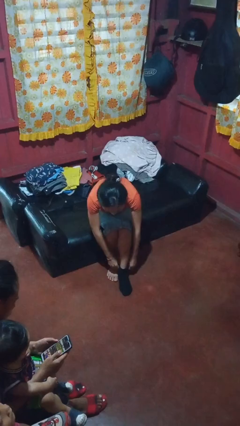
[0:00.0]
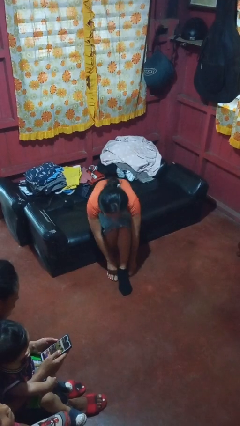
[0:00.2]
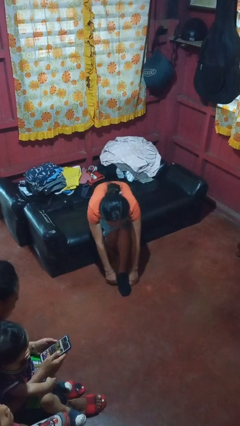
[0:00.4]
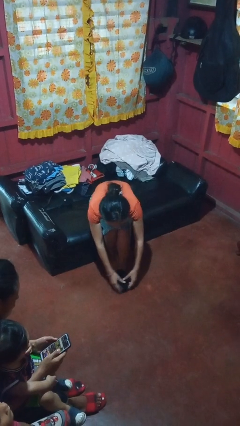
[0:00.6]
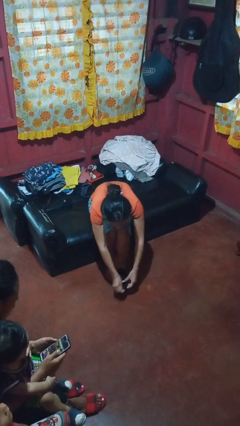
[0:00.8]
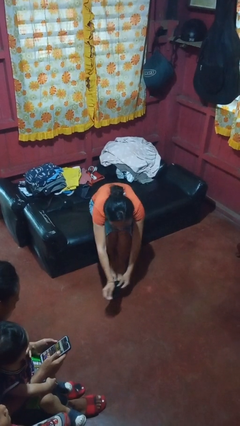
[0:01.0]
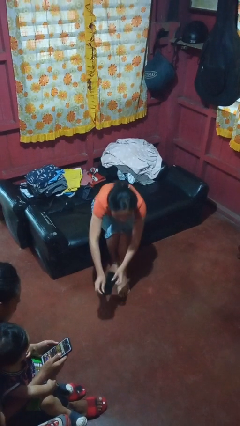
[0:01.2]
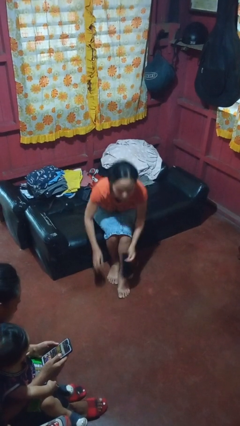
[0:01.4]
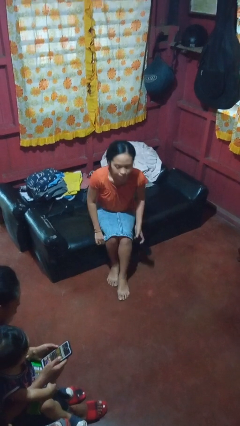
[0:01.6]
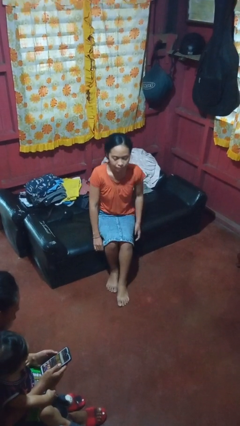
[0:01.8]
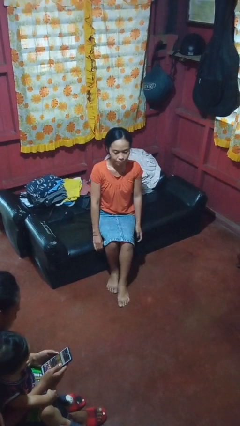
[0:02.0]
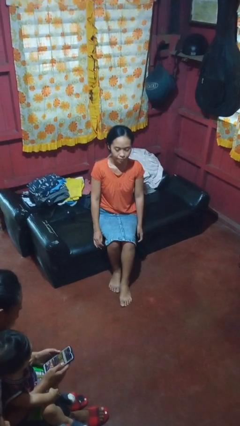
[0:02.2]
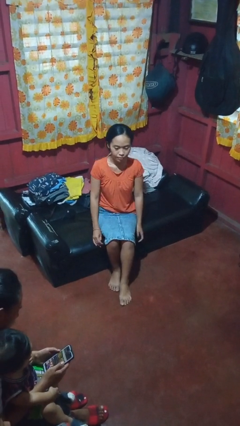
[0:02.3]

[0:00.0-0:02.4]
person takes off socks

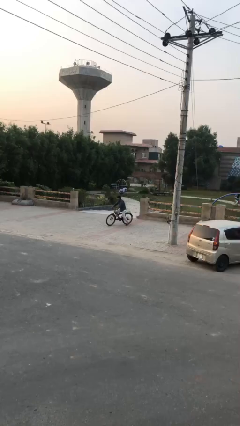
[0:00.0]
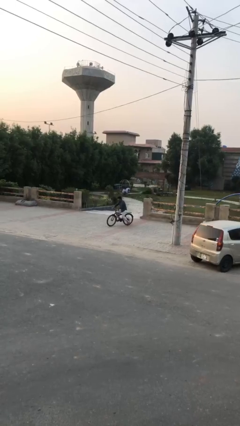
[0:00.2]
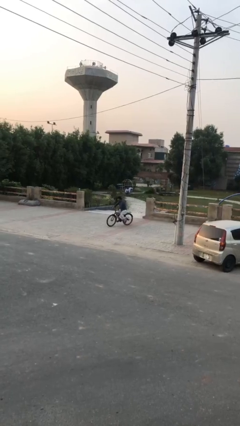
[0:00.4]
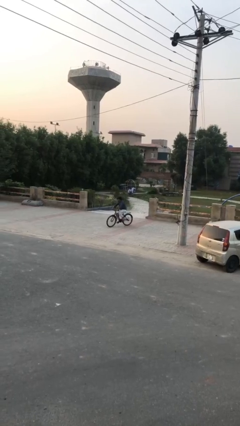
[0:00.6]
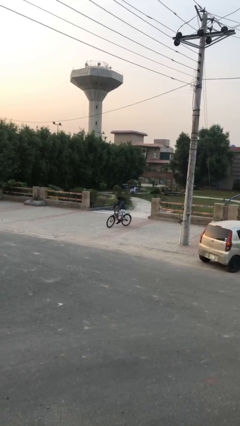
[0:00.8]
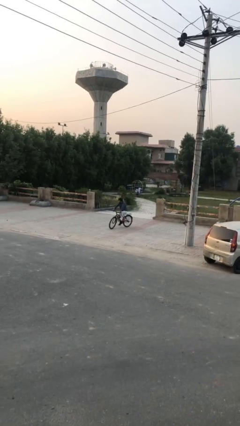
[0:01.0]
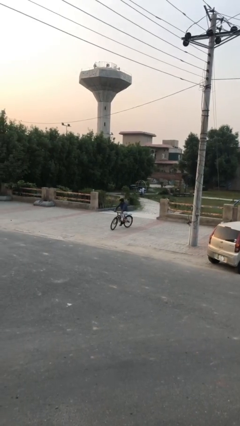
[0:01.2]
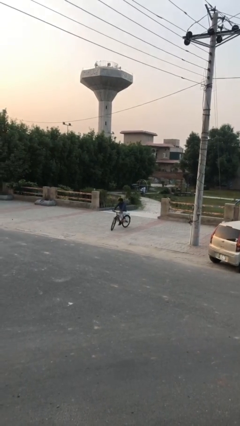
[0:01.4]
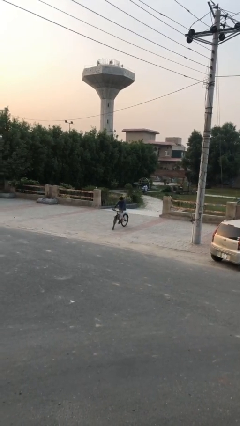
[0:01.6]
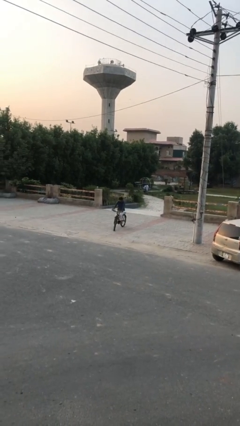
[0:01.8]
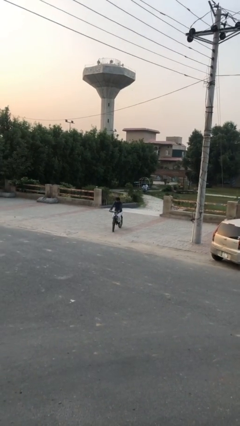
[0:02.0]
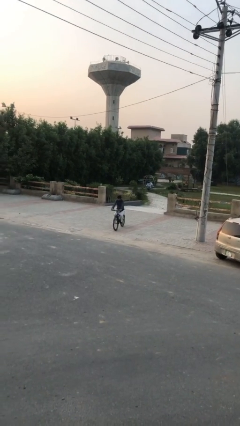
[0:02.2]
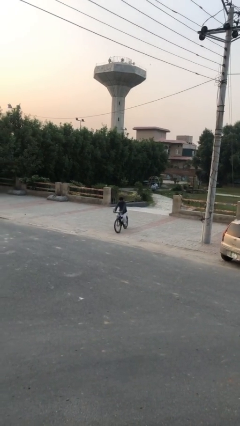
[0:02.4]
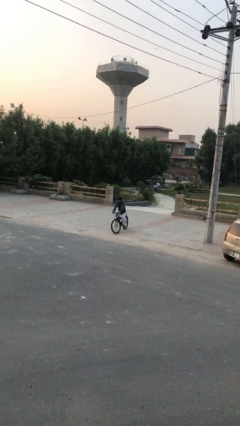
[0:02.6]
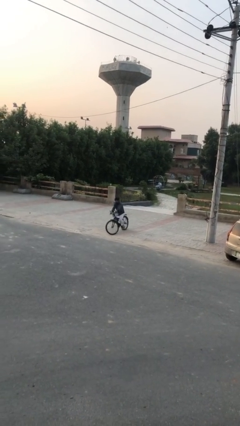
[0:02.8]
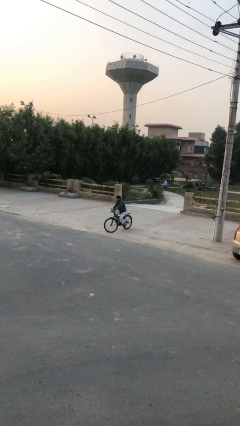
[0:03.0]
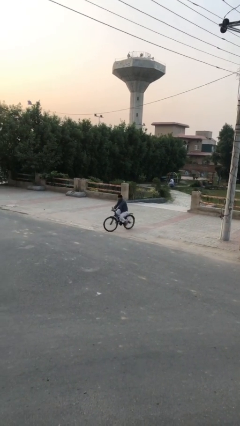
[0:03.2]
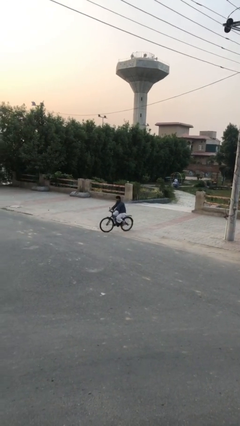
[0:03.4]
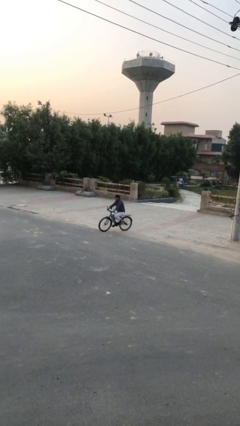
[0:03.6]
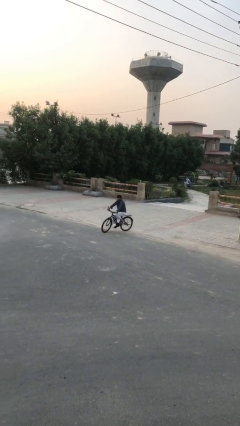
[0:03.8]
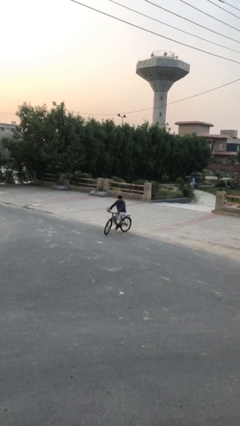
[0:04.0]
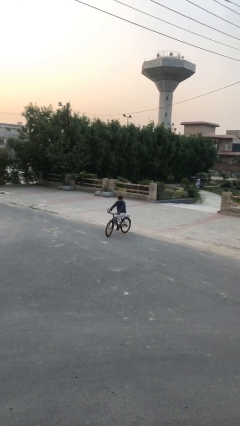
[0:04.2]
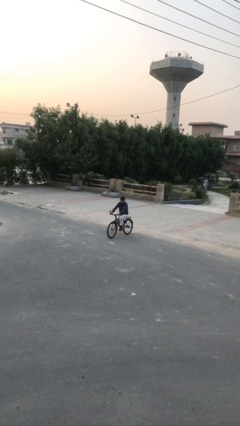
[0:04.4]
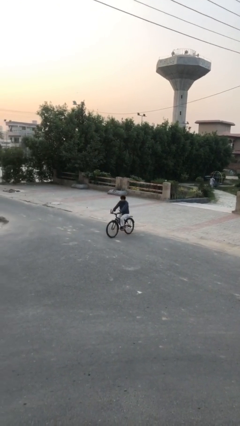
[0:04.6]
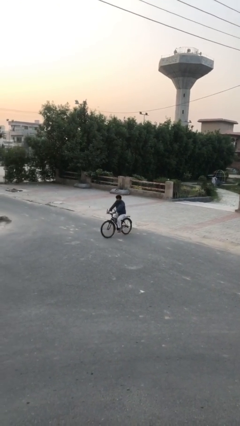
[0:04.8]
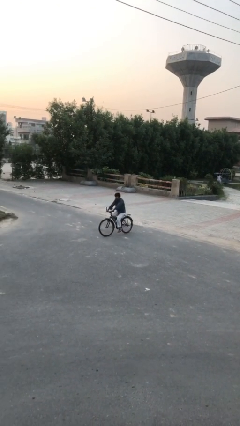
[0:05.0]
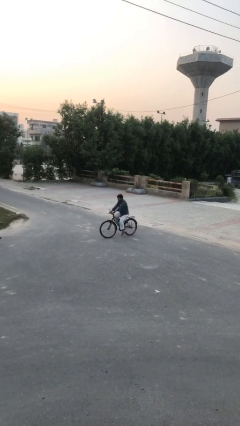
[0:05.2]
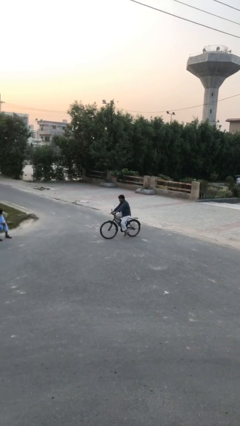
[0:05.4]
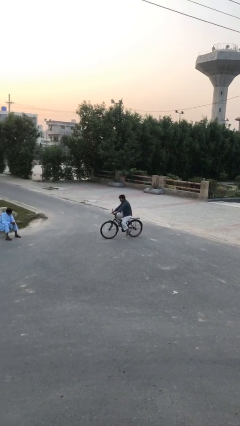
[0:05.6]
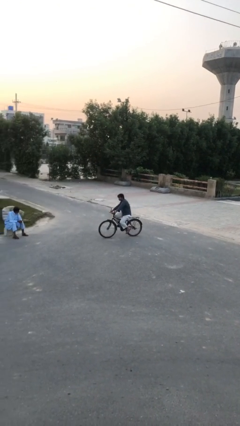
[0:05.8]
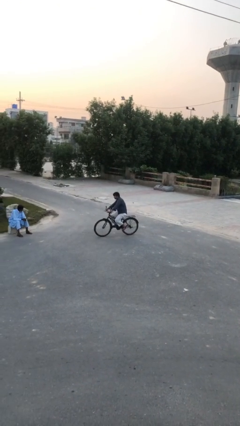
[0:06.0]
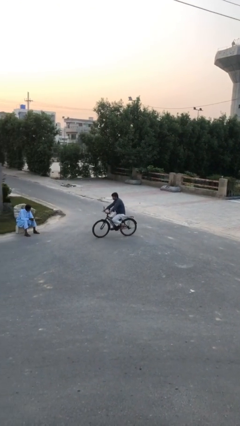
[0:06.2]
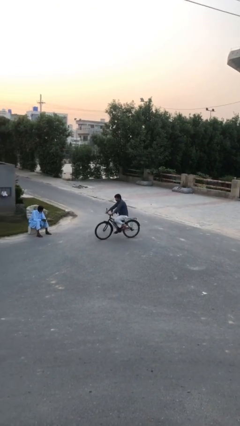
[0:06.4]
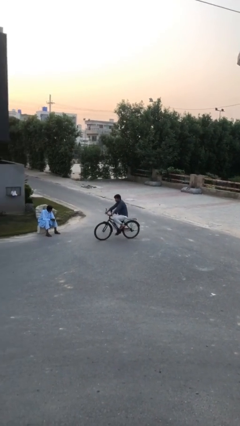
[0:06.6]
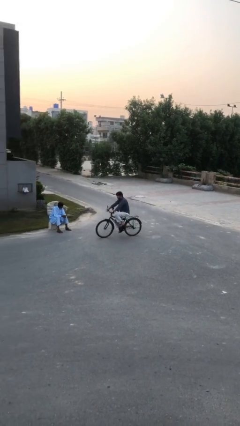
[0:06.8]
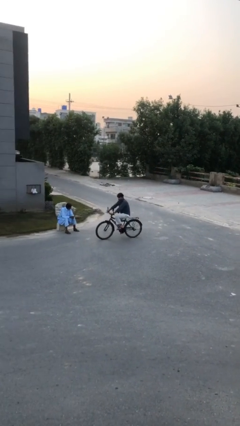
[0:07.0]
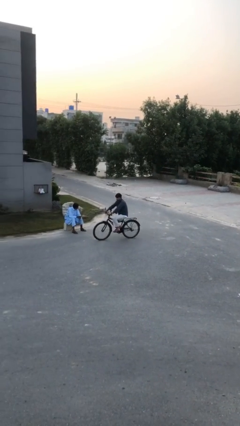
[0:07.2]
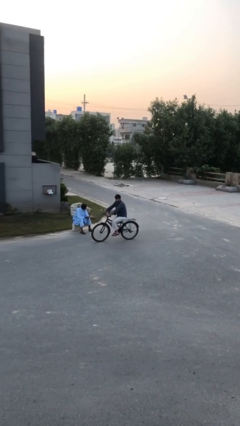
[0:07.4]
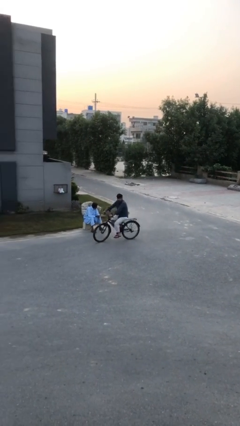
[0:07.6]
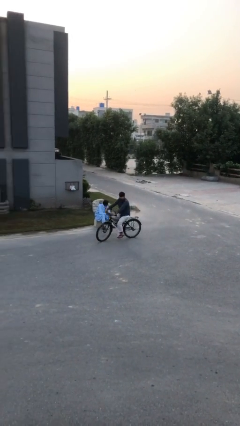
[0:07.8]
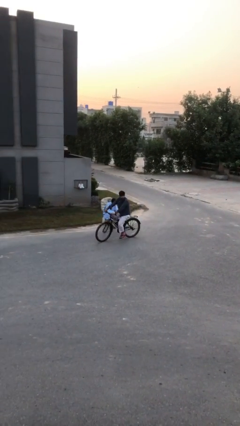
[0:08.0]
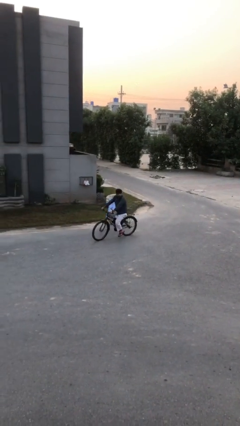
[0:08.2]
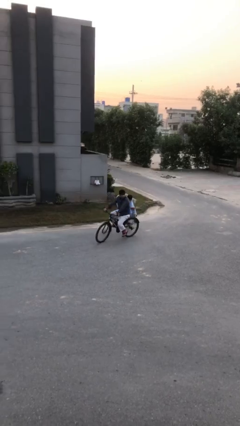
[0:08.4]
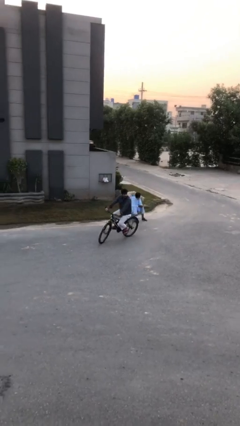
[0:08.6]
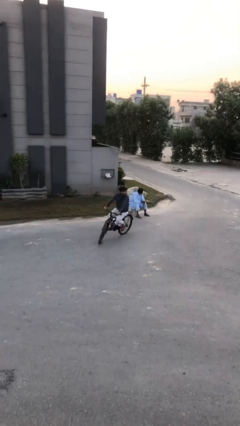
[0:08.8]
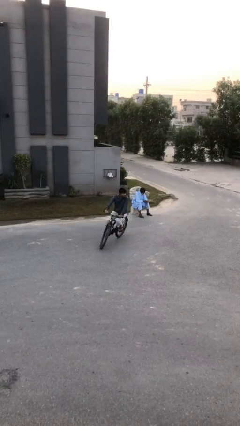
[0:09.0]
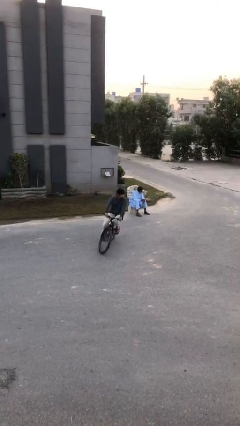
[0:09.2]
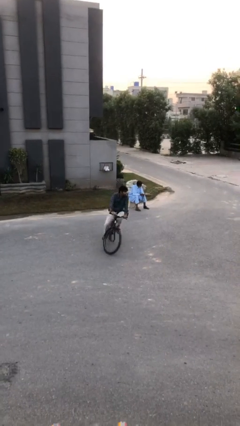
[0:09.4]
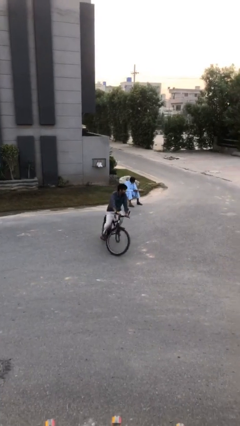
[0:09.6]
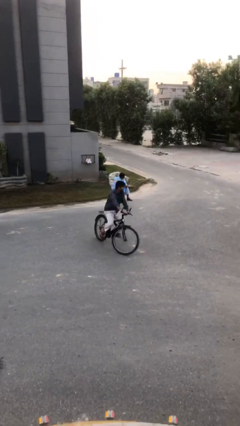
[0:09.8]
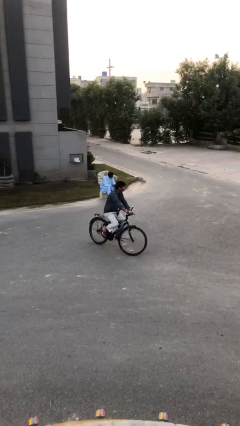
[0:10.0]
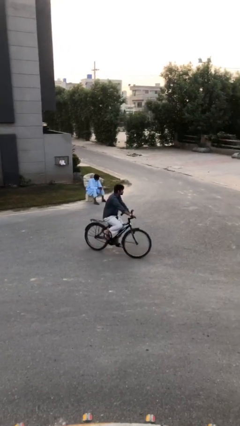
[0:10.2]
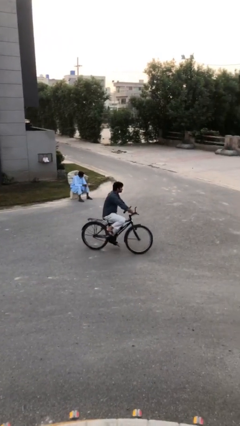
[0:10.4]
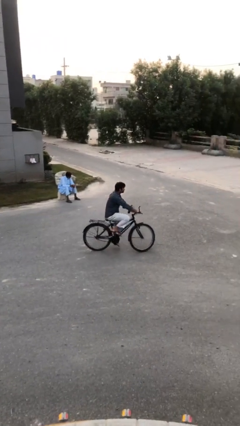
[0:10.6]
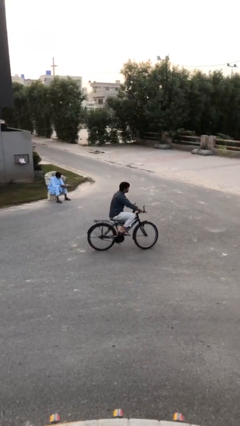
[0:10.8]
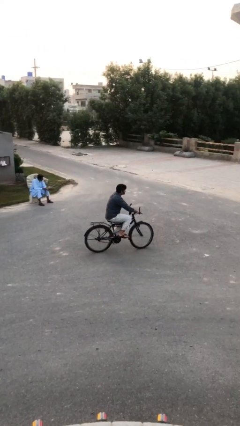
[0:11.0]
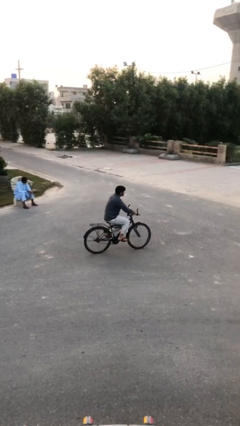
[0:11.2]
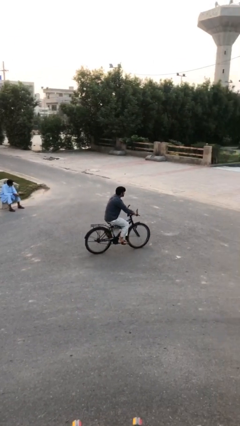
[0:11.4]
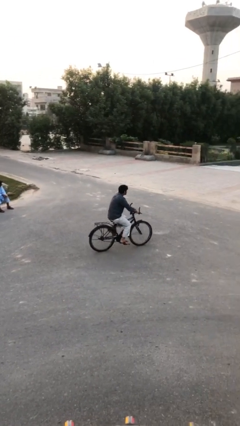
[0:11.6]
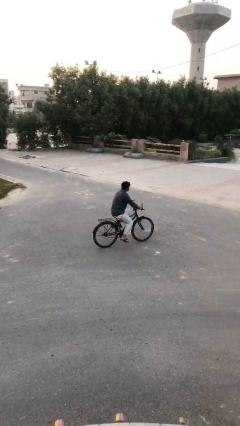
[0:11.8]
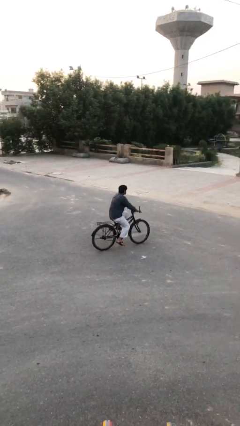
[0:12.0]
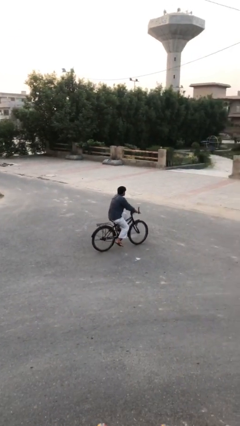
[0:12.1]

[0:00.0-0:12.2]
person rides bicycle

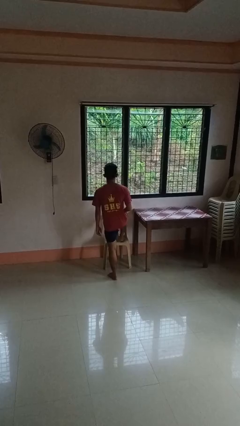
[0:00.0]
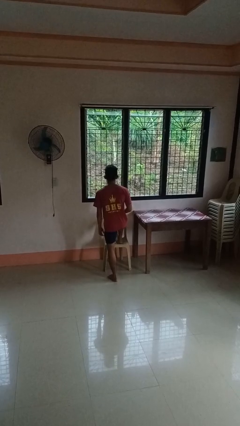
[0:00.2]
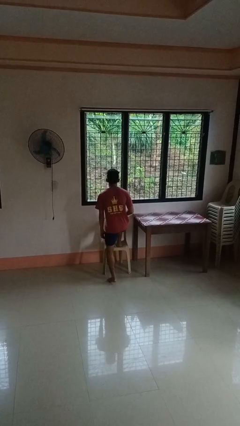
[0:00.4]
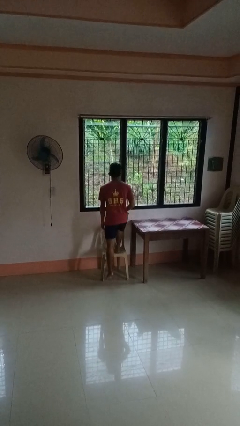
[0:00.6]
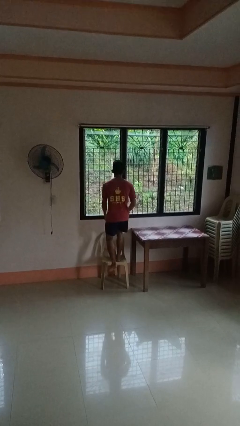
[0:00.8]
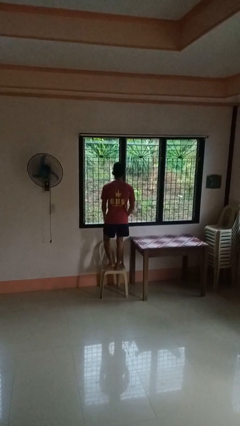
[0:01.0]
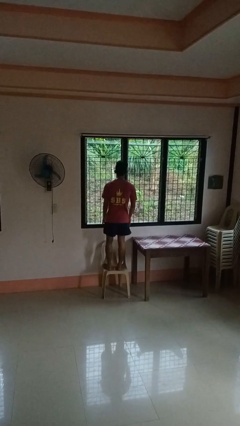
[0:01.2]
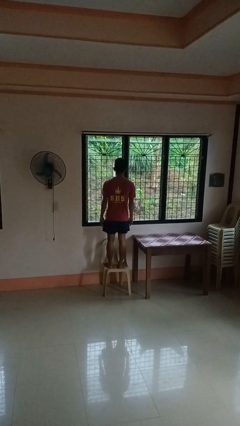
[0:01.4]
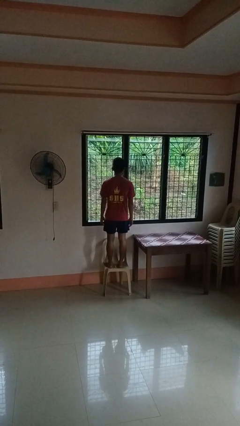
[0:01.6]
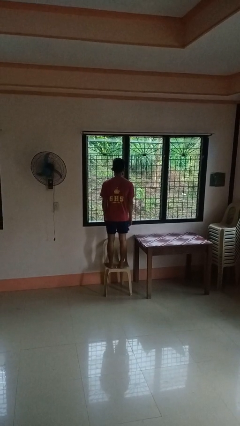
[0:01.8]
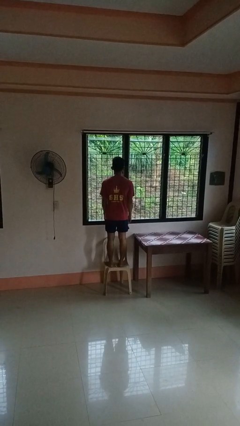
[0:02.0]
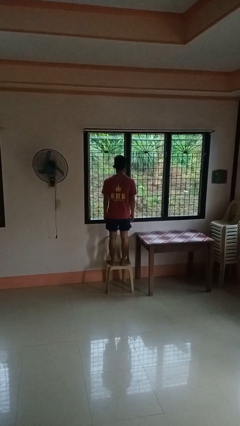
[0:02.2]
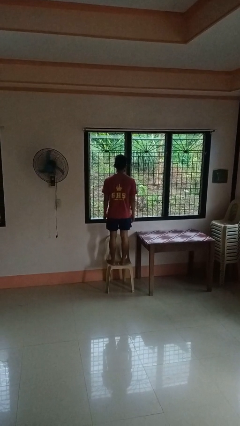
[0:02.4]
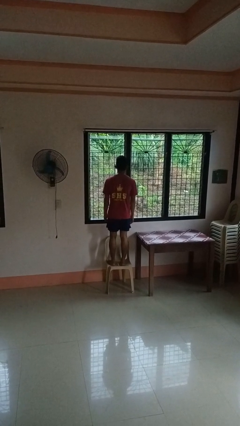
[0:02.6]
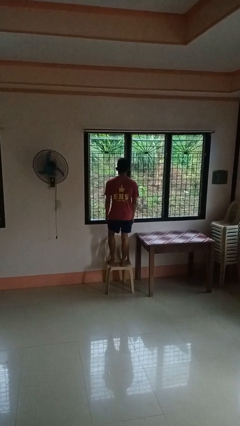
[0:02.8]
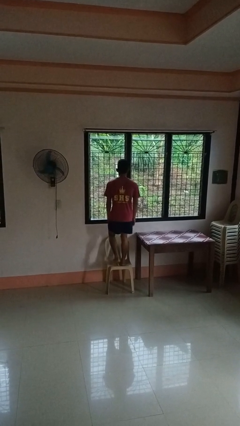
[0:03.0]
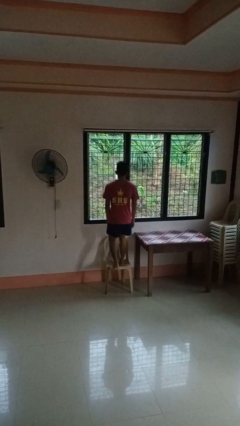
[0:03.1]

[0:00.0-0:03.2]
person climbs on chair

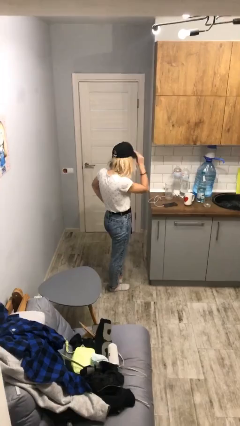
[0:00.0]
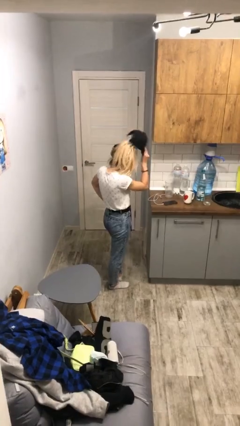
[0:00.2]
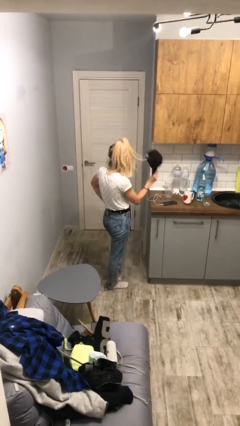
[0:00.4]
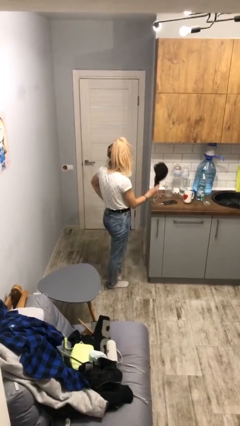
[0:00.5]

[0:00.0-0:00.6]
person takes off hat
